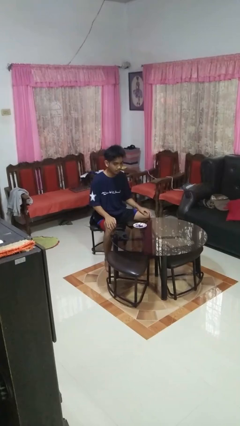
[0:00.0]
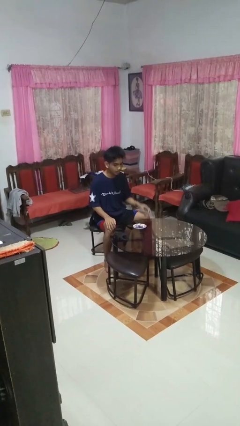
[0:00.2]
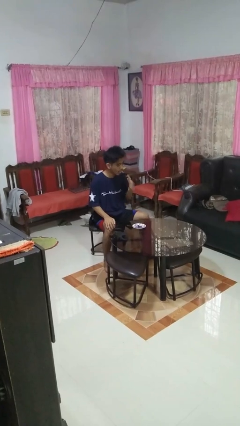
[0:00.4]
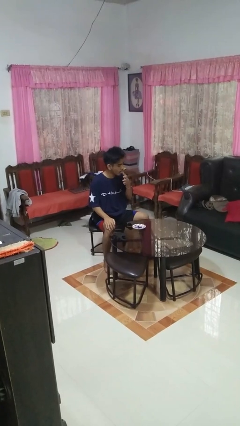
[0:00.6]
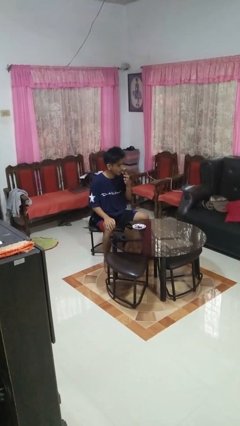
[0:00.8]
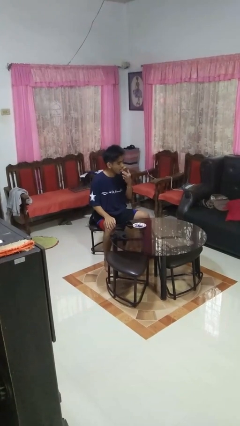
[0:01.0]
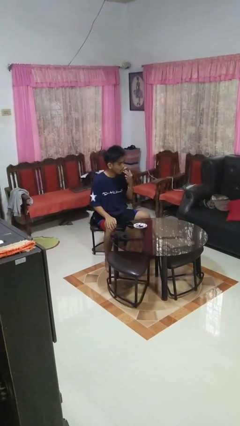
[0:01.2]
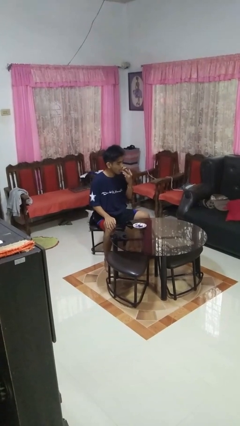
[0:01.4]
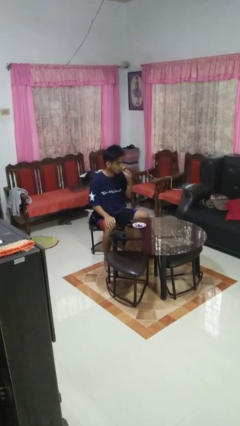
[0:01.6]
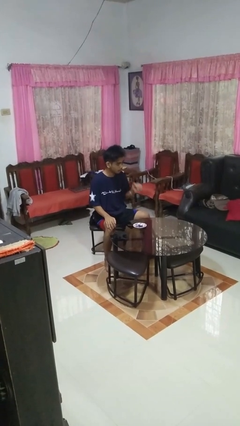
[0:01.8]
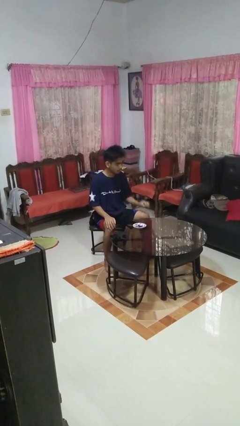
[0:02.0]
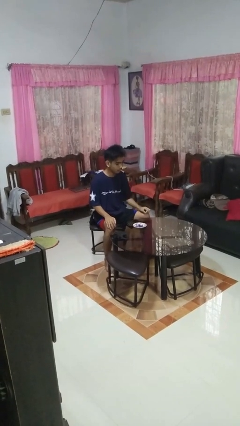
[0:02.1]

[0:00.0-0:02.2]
person licks fingers

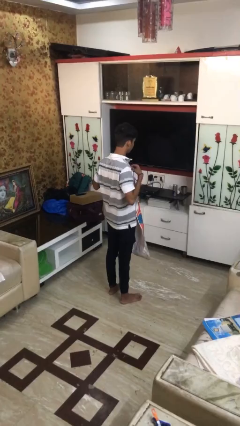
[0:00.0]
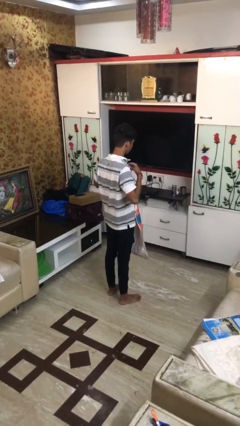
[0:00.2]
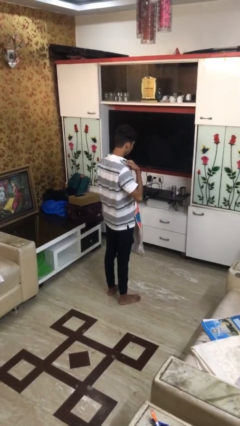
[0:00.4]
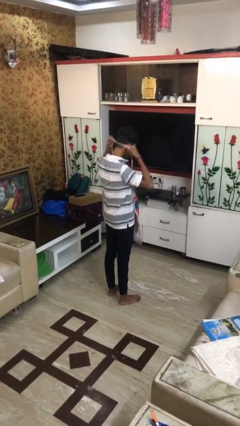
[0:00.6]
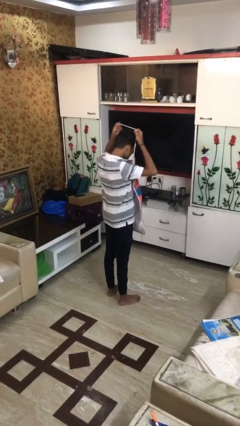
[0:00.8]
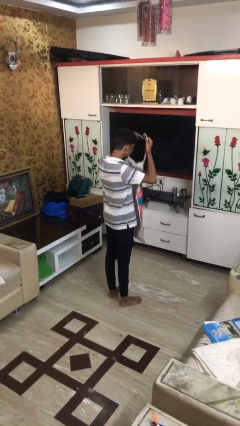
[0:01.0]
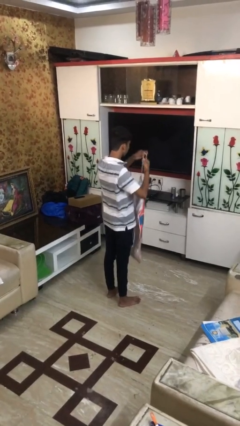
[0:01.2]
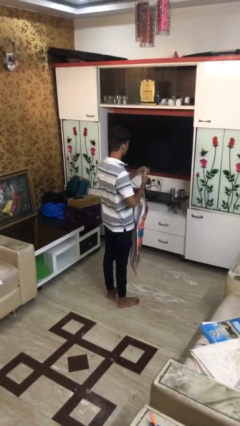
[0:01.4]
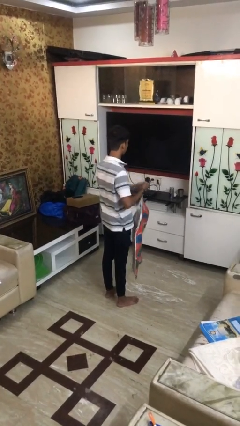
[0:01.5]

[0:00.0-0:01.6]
person takes off apron

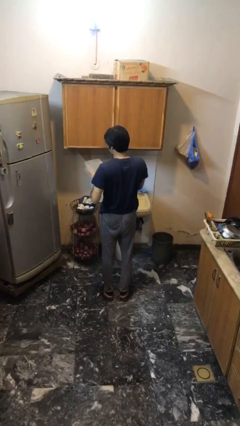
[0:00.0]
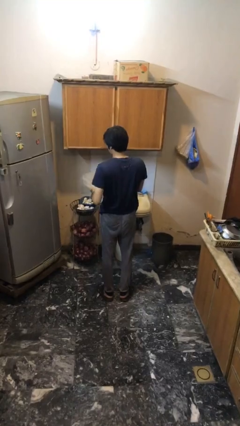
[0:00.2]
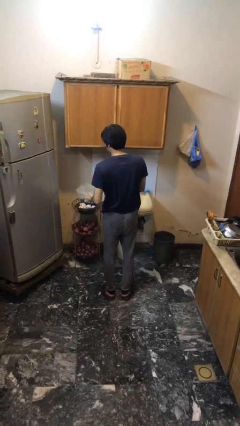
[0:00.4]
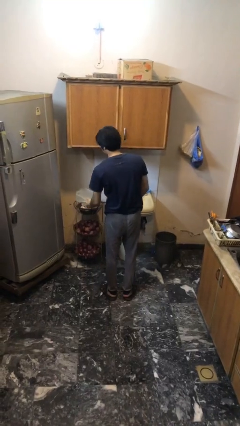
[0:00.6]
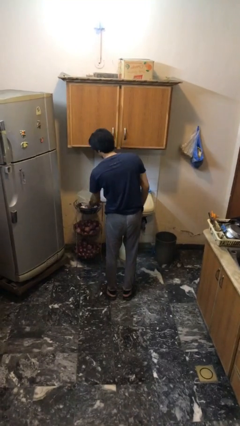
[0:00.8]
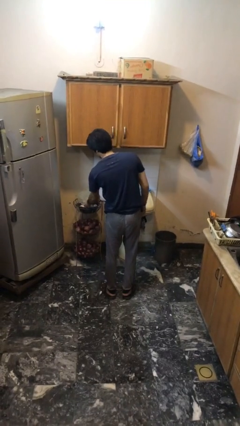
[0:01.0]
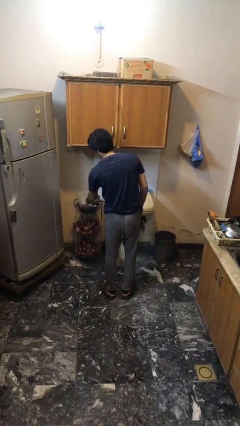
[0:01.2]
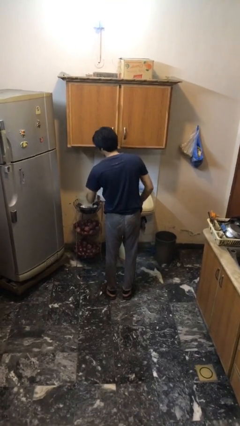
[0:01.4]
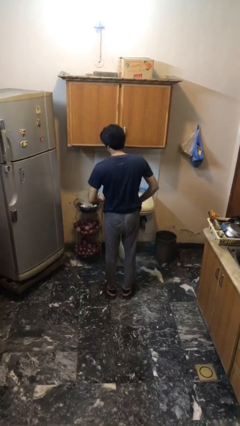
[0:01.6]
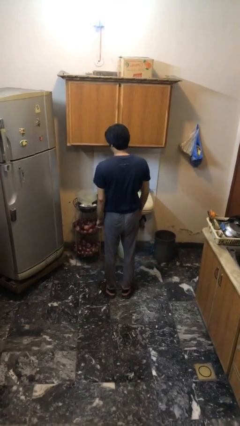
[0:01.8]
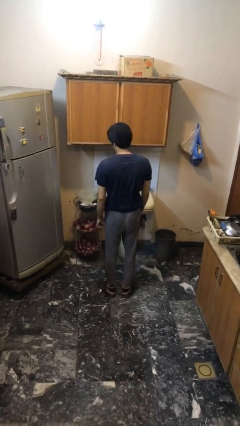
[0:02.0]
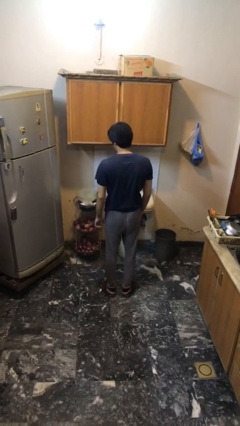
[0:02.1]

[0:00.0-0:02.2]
person puts down object on table

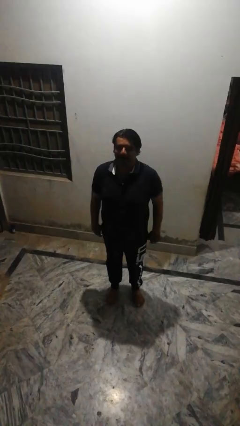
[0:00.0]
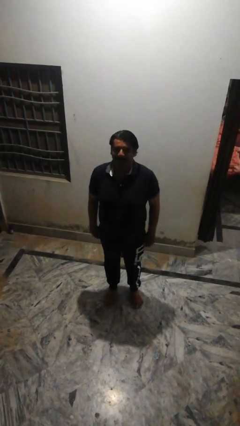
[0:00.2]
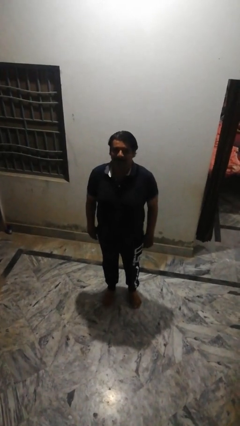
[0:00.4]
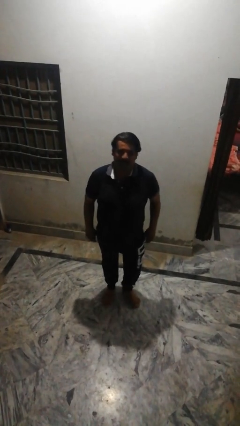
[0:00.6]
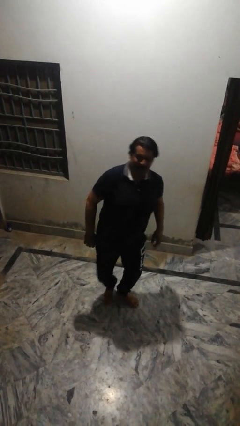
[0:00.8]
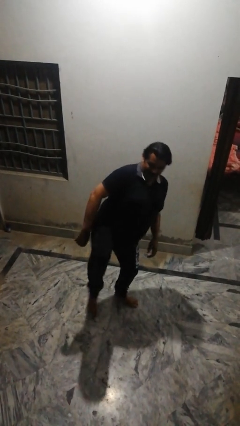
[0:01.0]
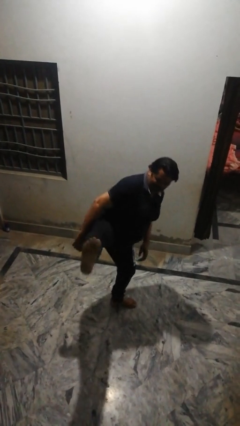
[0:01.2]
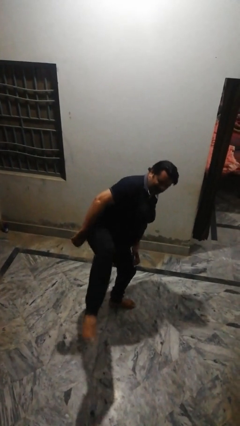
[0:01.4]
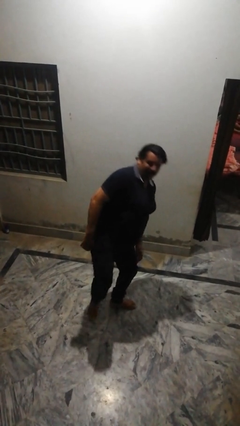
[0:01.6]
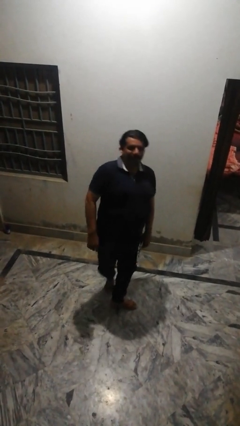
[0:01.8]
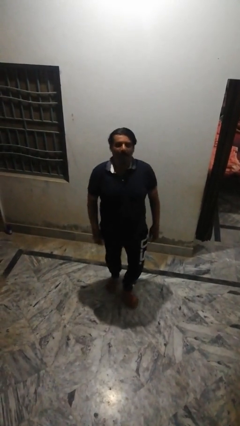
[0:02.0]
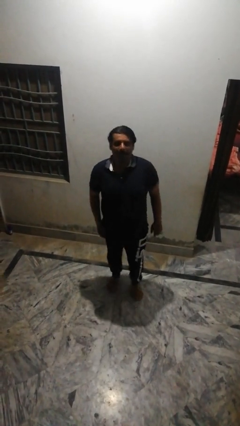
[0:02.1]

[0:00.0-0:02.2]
person karate kicks

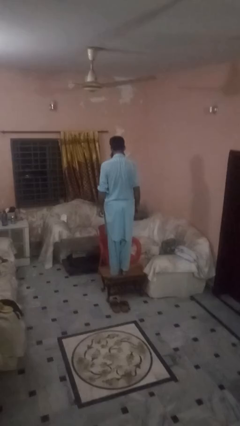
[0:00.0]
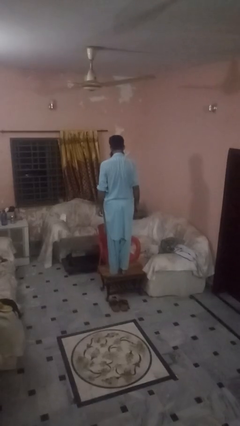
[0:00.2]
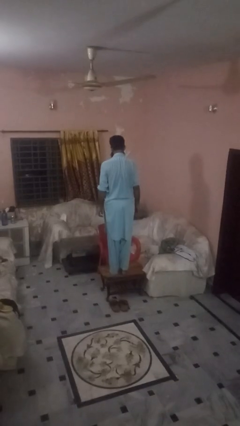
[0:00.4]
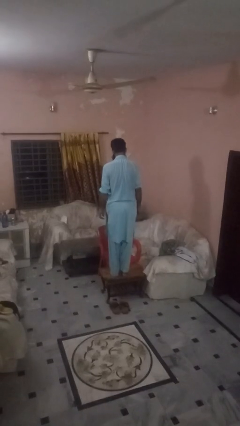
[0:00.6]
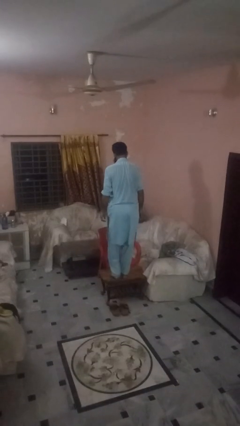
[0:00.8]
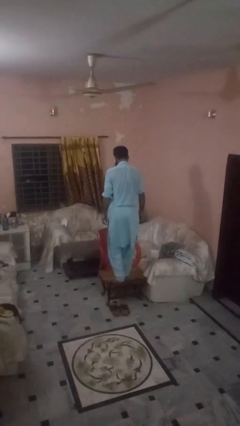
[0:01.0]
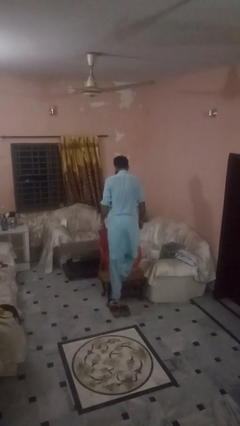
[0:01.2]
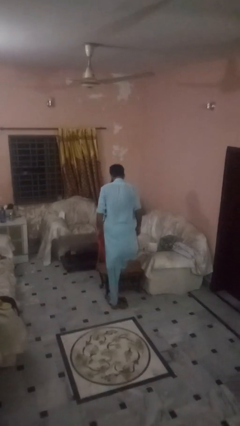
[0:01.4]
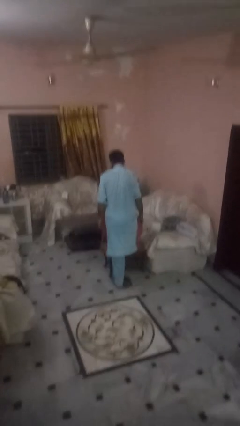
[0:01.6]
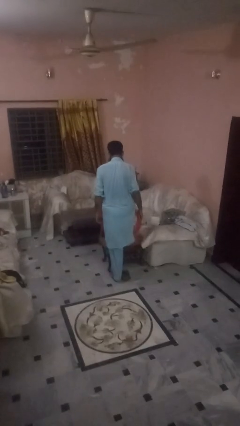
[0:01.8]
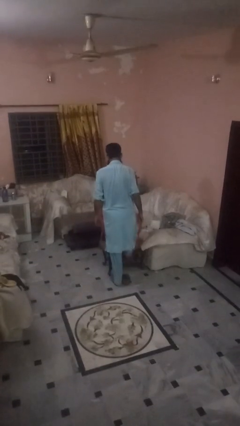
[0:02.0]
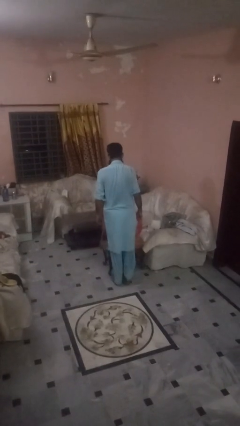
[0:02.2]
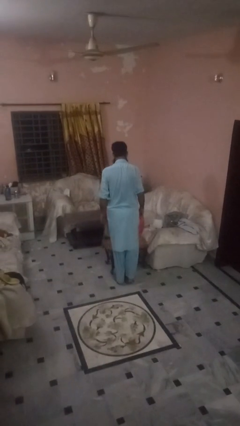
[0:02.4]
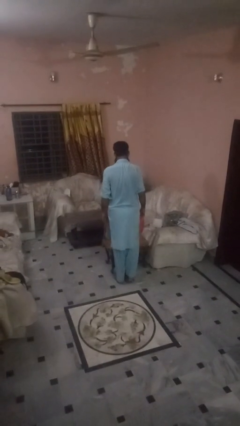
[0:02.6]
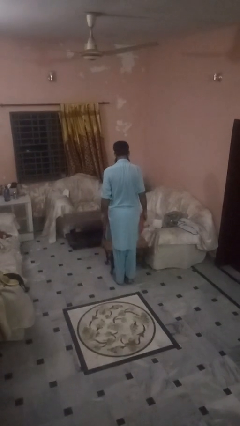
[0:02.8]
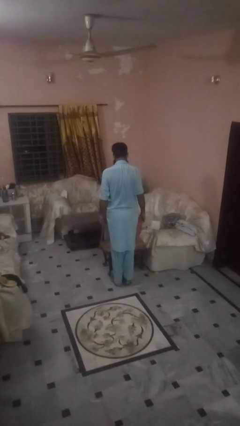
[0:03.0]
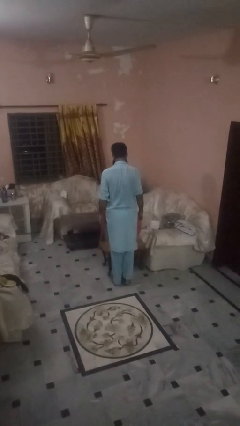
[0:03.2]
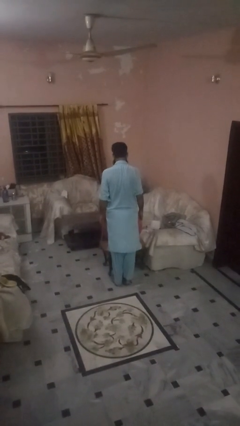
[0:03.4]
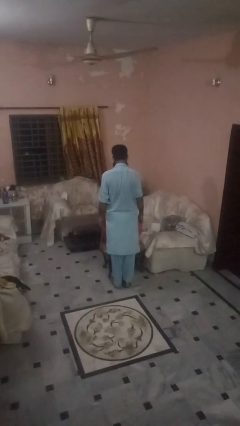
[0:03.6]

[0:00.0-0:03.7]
person climbs off table

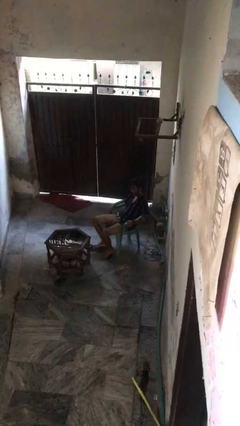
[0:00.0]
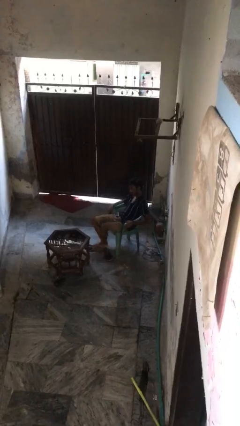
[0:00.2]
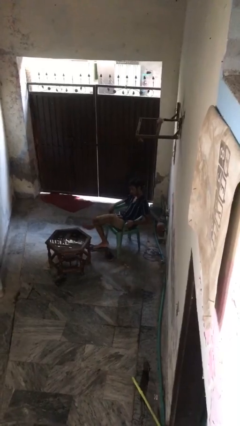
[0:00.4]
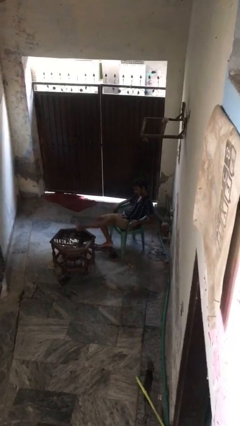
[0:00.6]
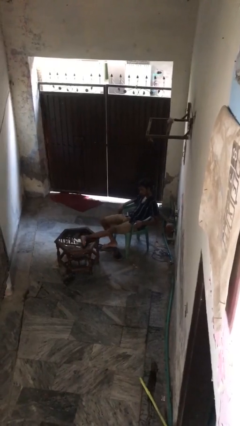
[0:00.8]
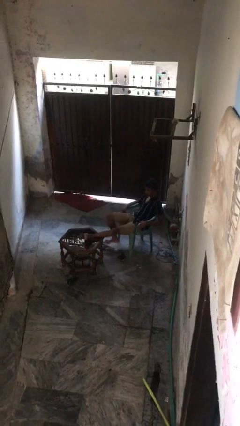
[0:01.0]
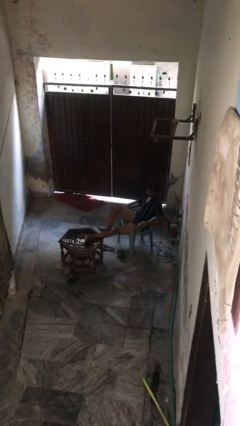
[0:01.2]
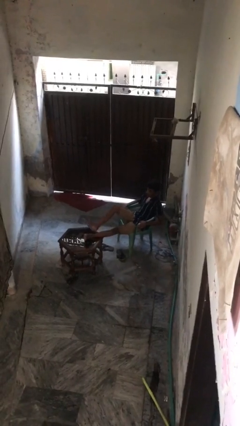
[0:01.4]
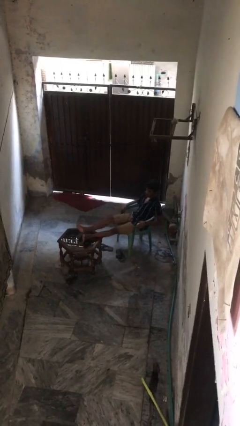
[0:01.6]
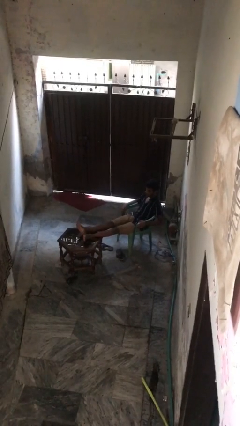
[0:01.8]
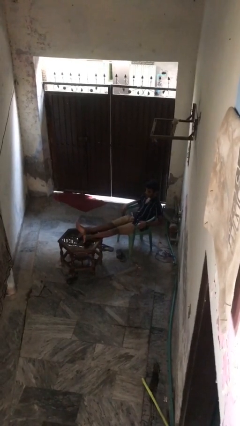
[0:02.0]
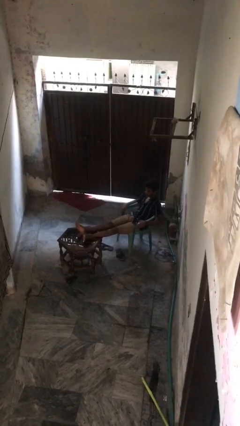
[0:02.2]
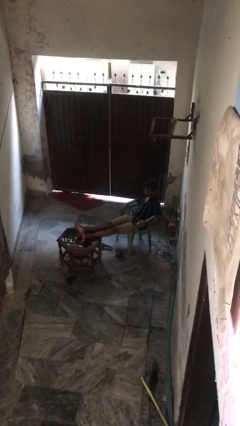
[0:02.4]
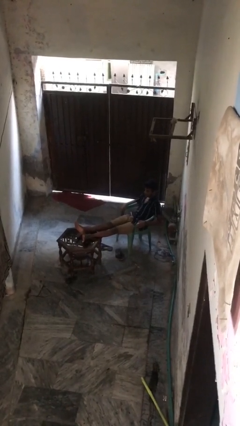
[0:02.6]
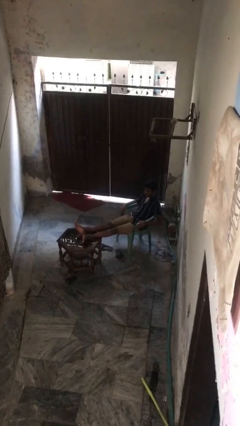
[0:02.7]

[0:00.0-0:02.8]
person puts feet up

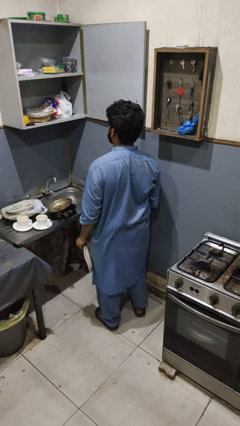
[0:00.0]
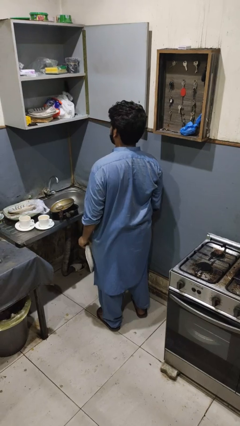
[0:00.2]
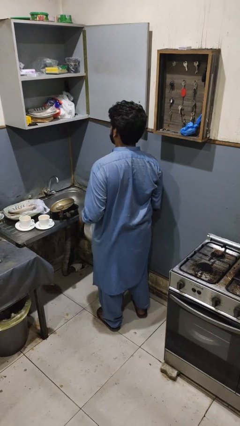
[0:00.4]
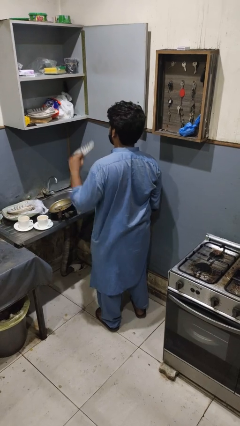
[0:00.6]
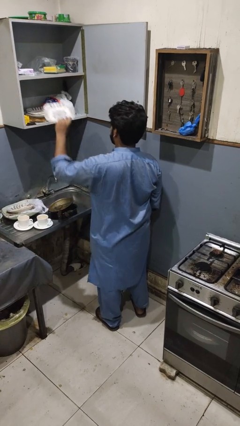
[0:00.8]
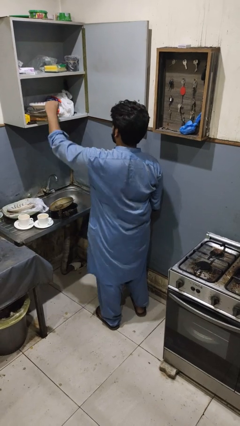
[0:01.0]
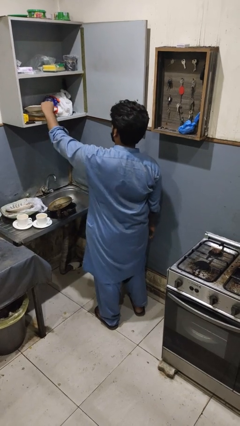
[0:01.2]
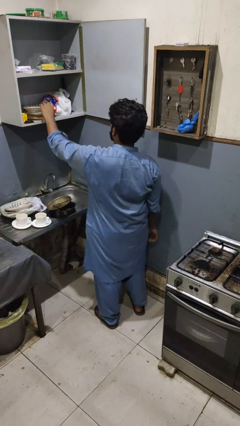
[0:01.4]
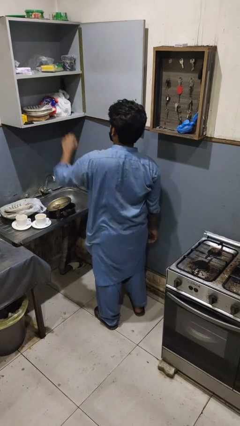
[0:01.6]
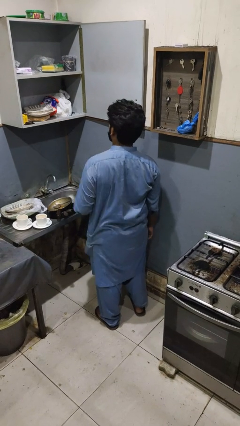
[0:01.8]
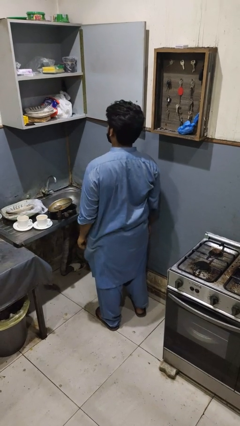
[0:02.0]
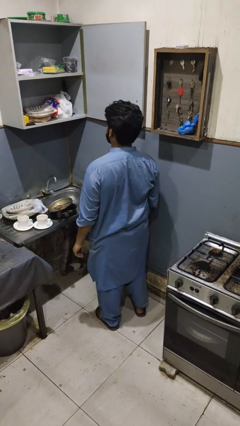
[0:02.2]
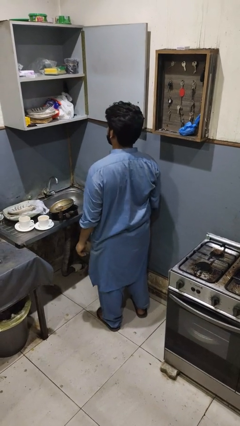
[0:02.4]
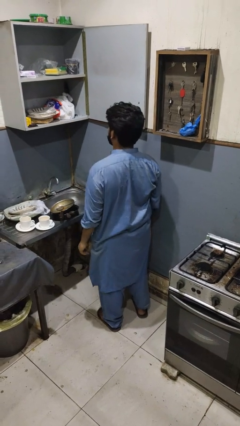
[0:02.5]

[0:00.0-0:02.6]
person puts object in cabinet
